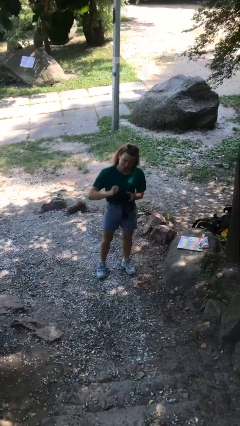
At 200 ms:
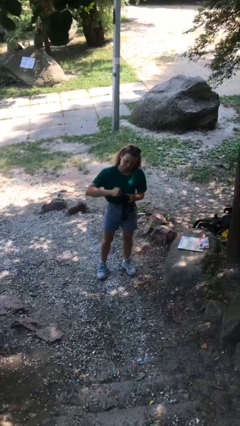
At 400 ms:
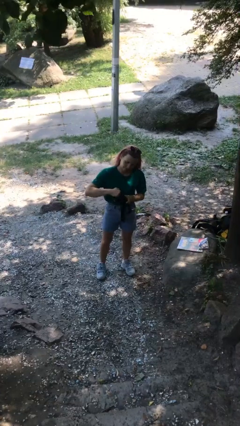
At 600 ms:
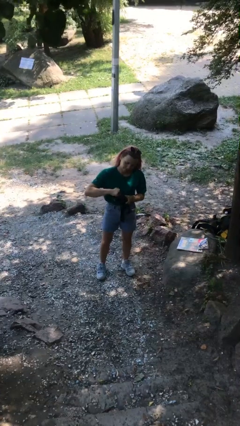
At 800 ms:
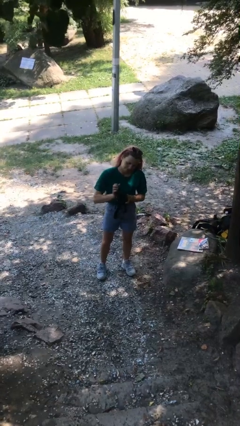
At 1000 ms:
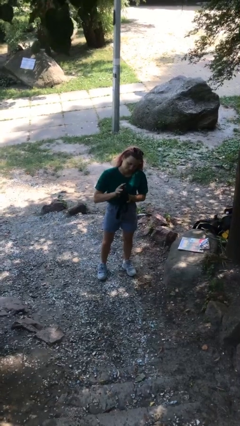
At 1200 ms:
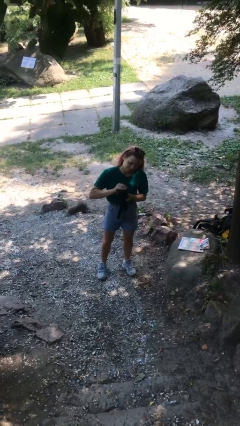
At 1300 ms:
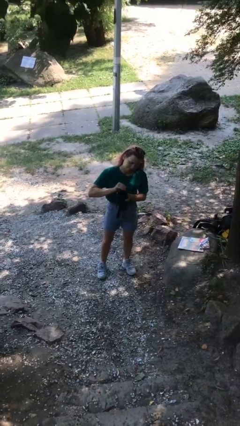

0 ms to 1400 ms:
person squeezes object

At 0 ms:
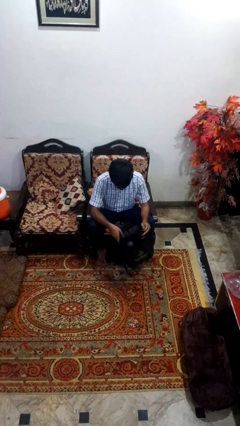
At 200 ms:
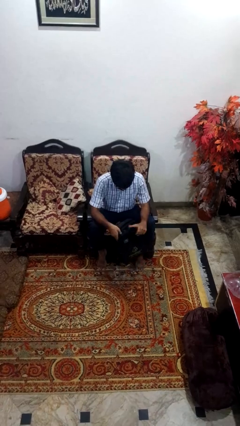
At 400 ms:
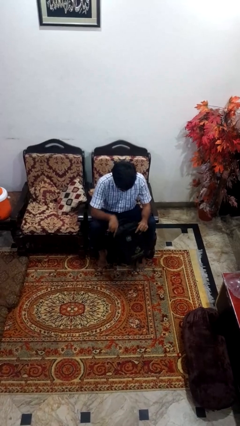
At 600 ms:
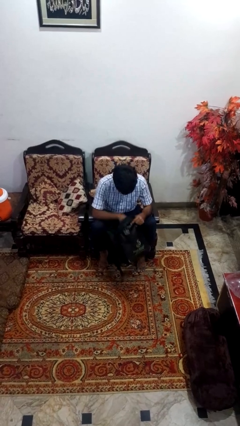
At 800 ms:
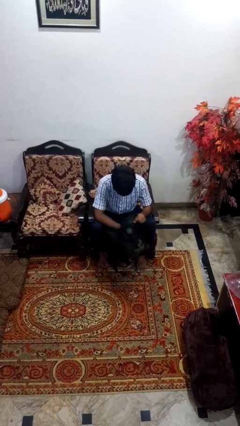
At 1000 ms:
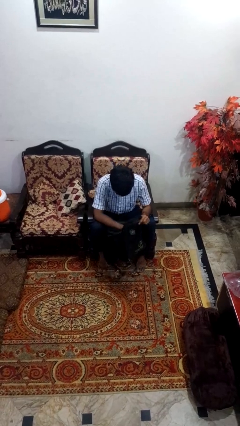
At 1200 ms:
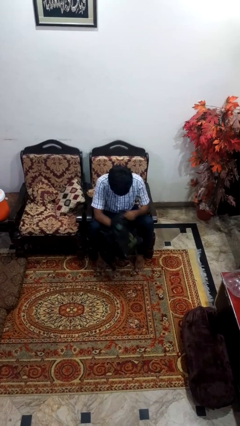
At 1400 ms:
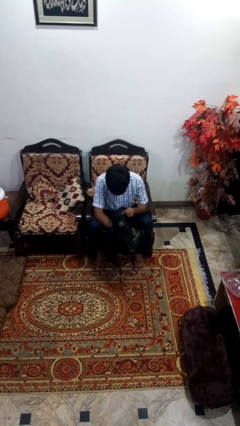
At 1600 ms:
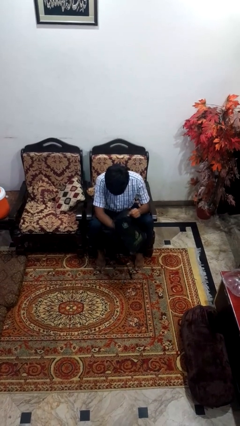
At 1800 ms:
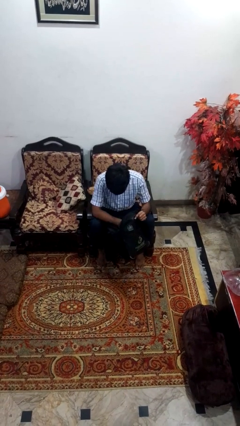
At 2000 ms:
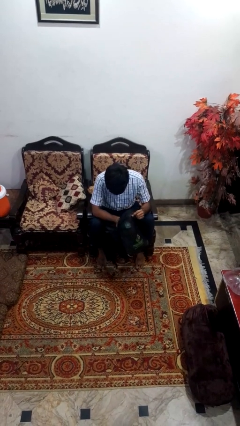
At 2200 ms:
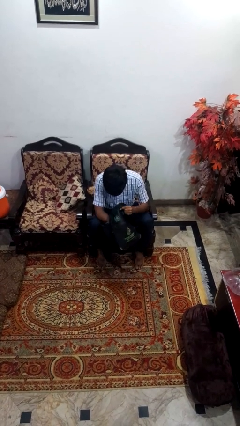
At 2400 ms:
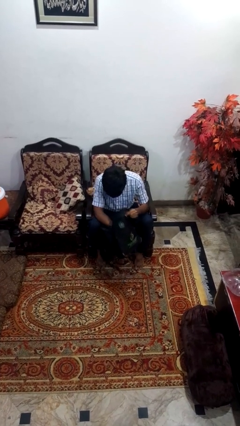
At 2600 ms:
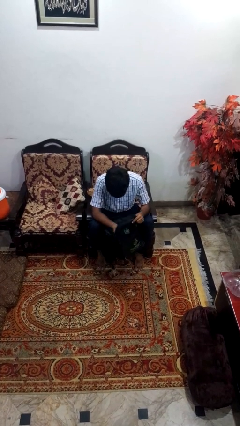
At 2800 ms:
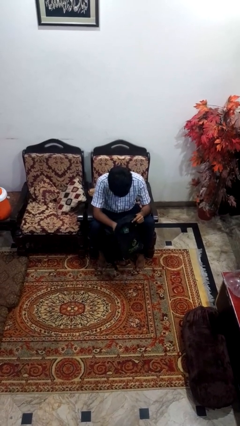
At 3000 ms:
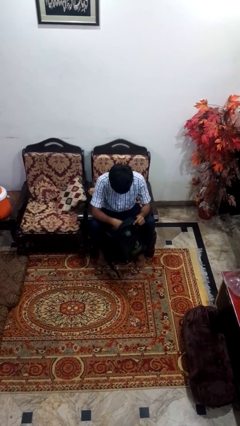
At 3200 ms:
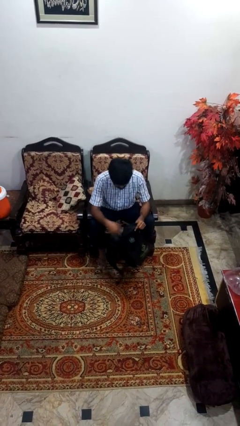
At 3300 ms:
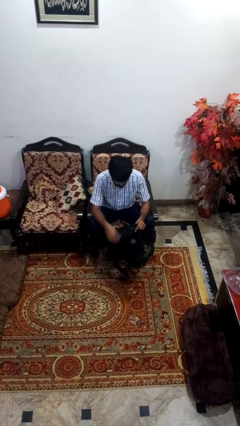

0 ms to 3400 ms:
person searches in bag

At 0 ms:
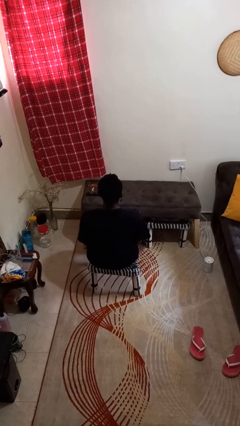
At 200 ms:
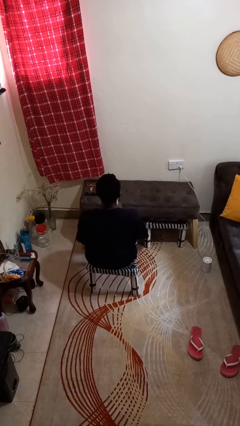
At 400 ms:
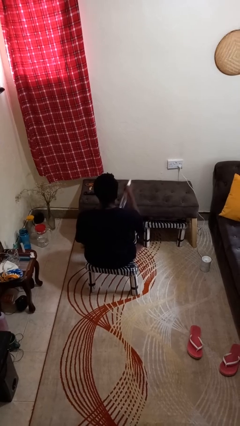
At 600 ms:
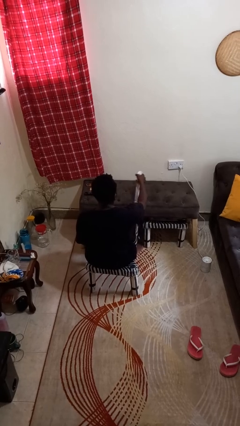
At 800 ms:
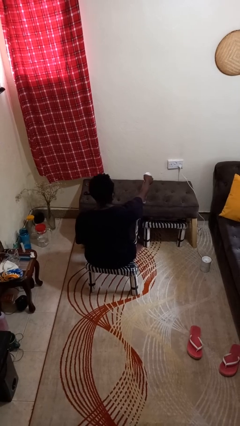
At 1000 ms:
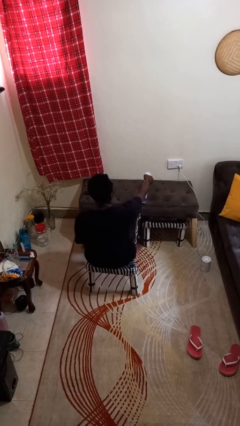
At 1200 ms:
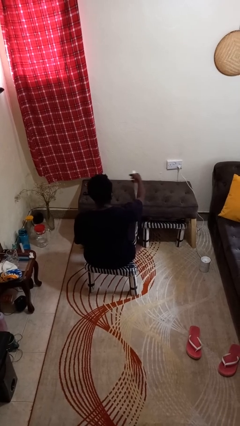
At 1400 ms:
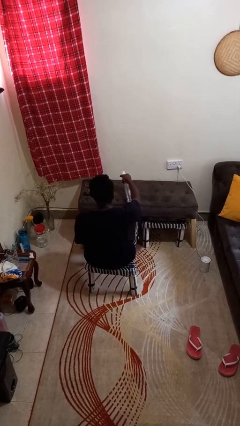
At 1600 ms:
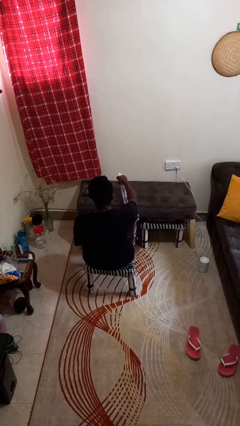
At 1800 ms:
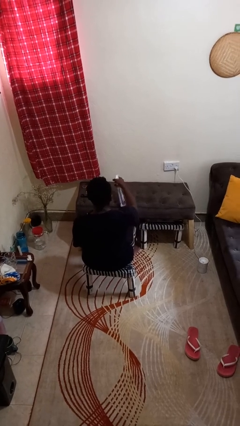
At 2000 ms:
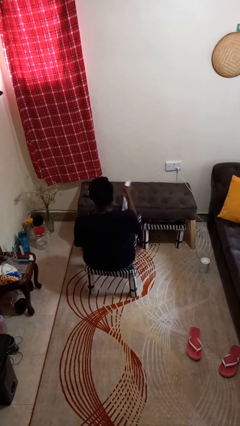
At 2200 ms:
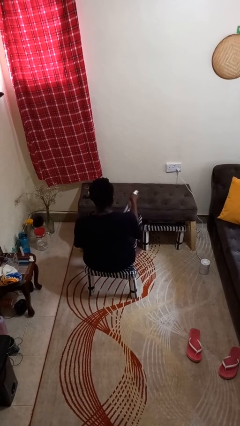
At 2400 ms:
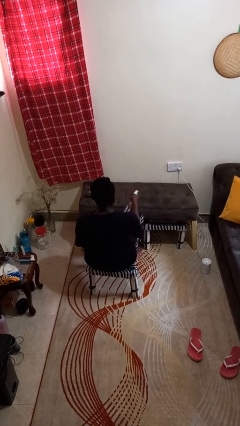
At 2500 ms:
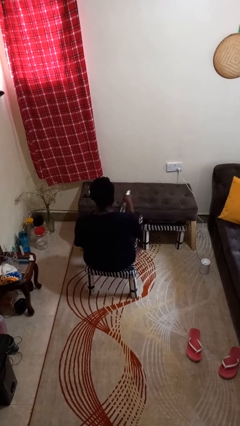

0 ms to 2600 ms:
person sprays from bottle

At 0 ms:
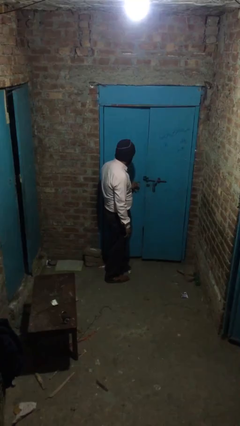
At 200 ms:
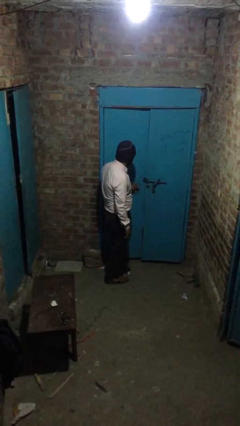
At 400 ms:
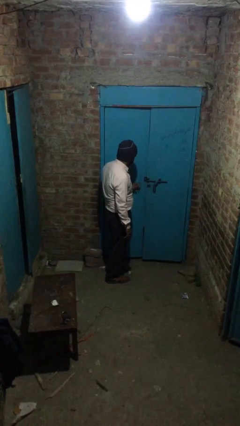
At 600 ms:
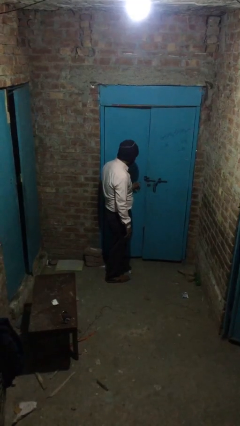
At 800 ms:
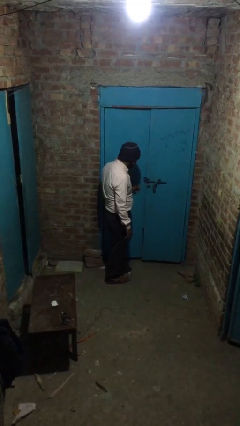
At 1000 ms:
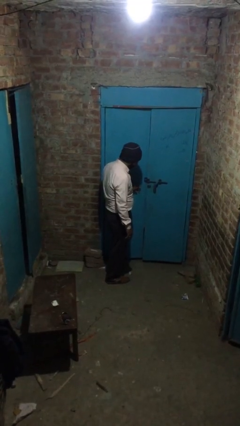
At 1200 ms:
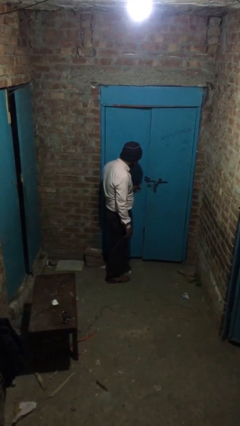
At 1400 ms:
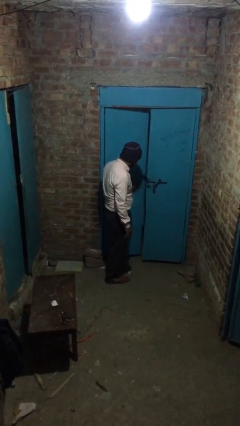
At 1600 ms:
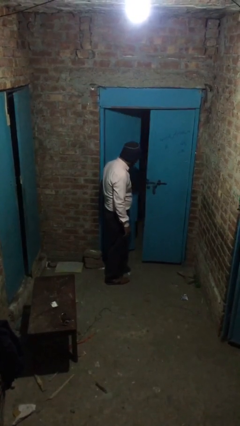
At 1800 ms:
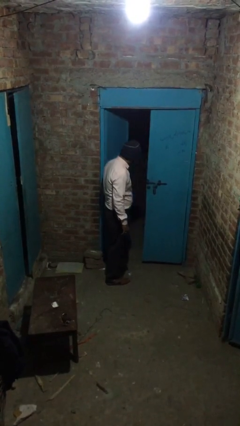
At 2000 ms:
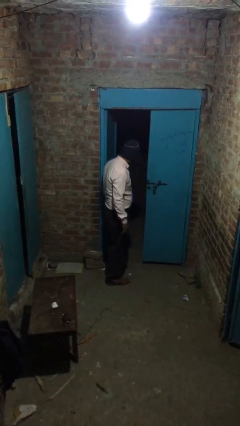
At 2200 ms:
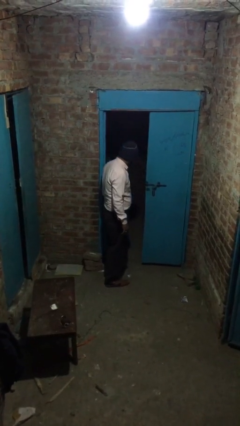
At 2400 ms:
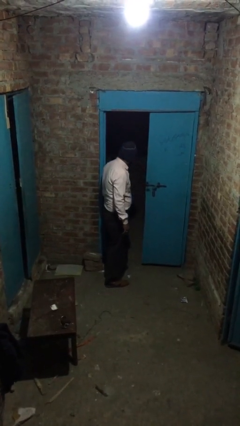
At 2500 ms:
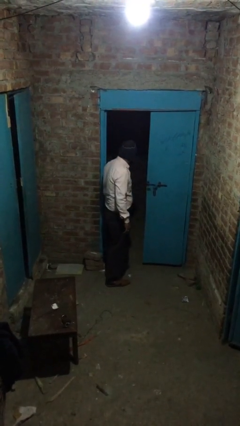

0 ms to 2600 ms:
person opens facility door

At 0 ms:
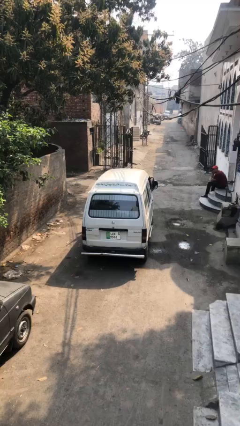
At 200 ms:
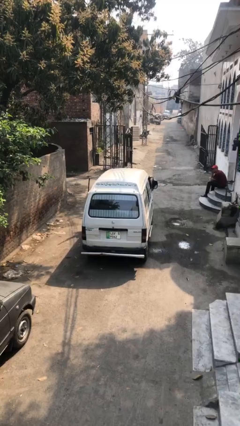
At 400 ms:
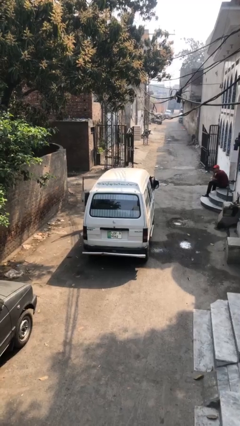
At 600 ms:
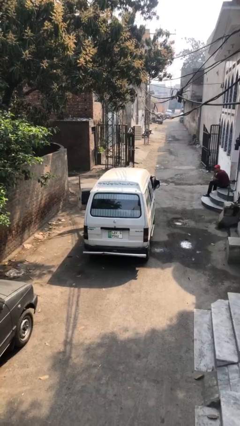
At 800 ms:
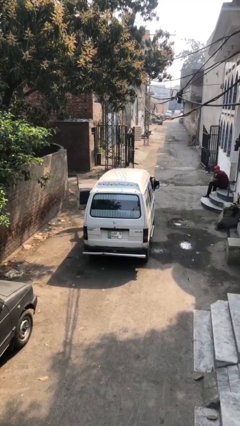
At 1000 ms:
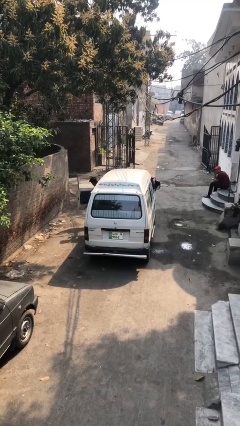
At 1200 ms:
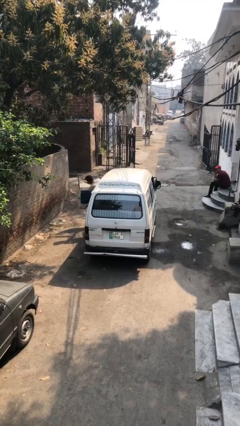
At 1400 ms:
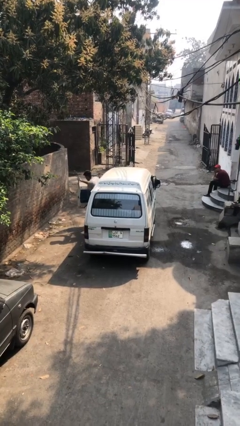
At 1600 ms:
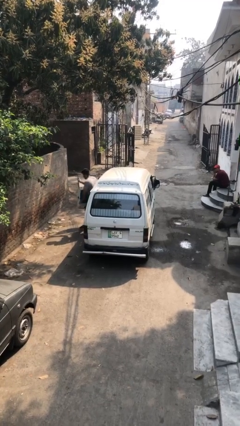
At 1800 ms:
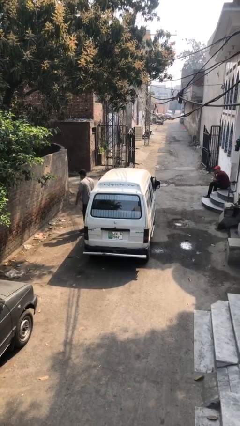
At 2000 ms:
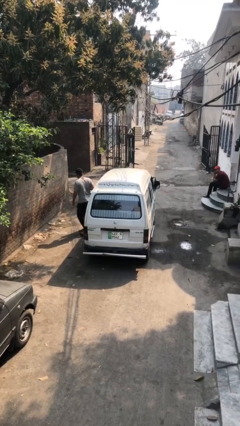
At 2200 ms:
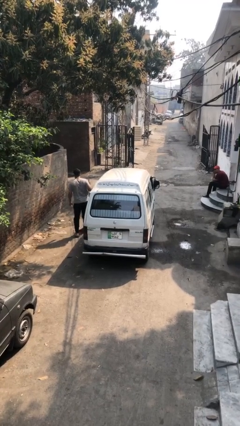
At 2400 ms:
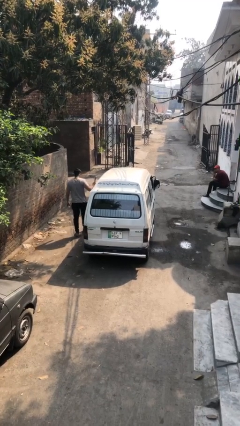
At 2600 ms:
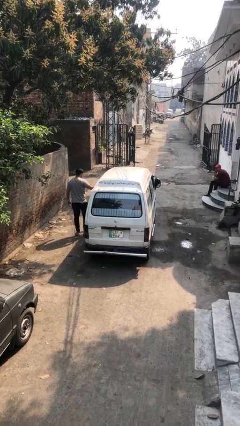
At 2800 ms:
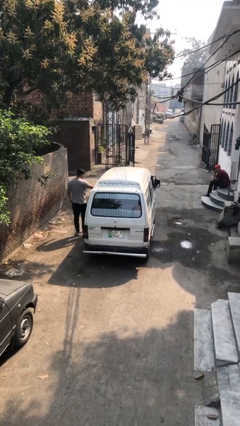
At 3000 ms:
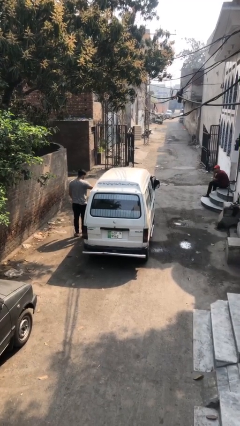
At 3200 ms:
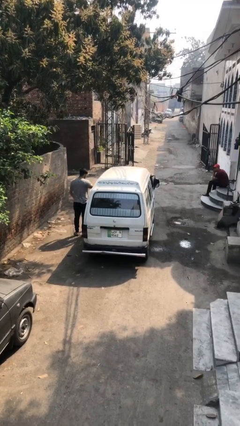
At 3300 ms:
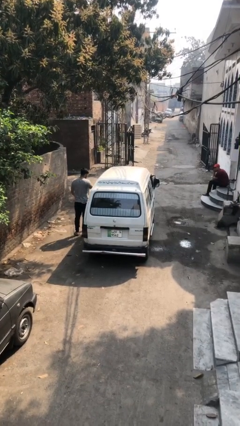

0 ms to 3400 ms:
car drops off person

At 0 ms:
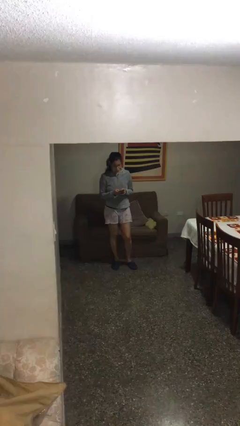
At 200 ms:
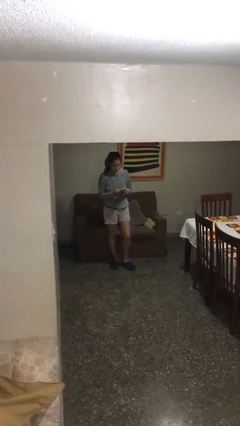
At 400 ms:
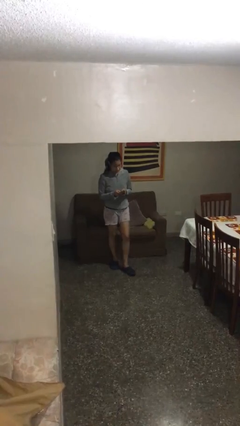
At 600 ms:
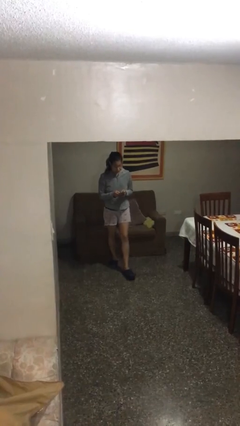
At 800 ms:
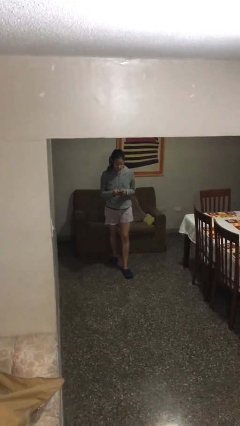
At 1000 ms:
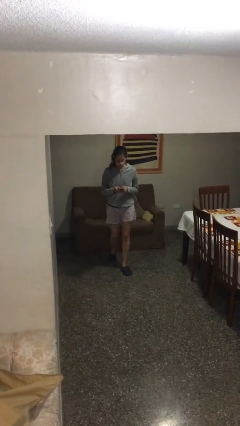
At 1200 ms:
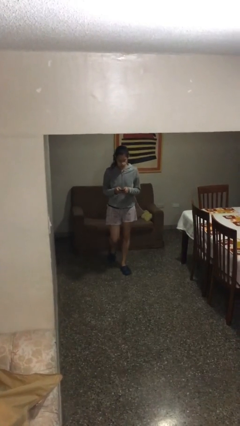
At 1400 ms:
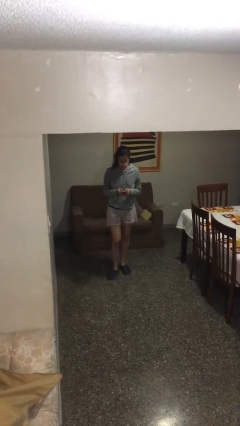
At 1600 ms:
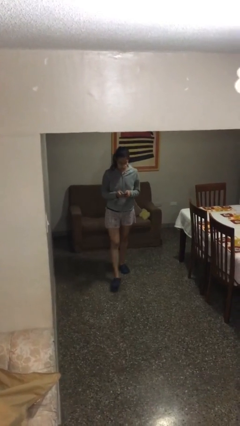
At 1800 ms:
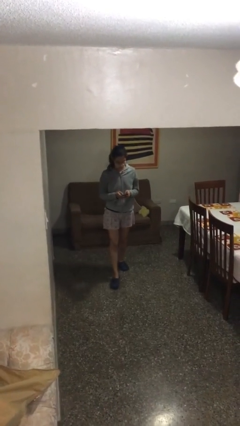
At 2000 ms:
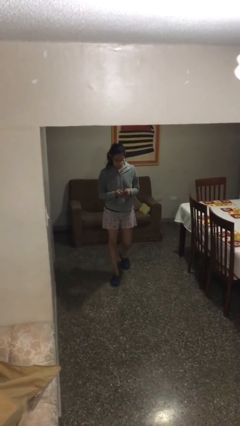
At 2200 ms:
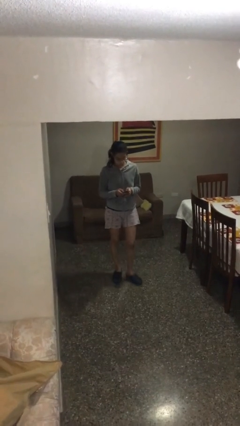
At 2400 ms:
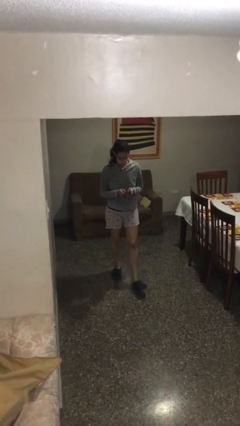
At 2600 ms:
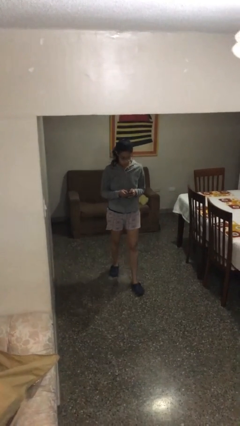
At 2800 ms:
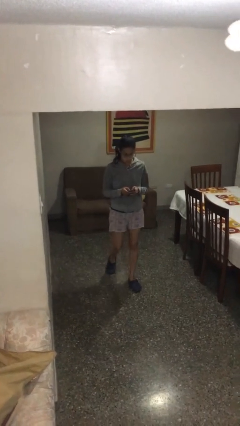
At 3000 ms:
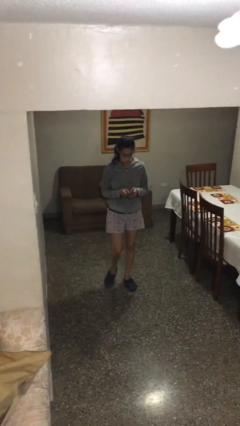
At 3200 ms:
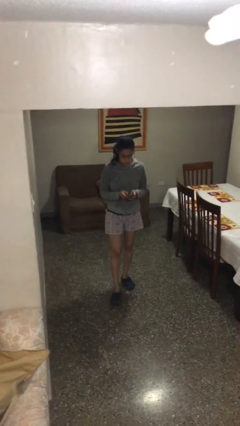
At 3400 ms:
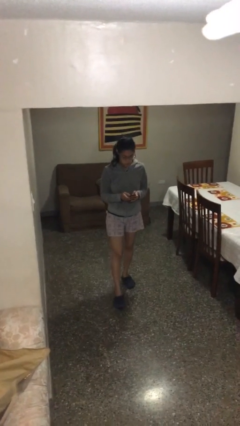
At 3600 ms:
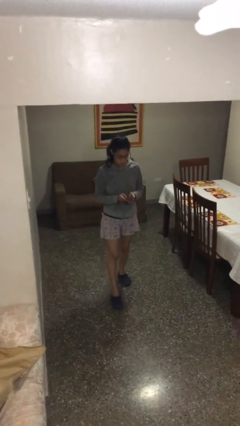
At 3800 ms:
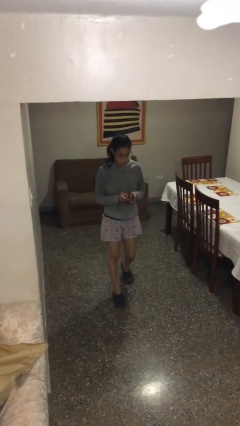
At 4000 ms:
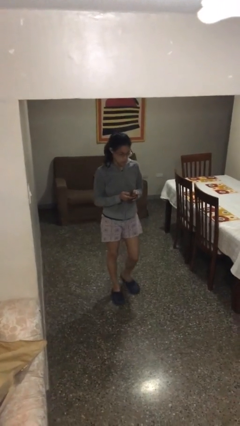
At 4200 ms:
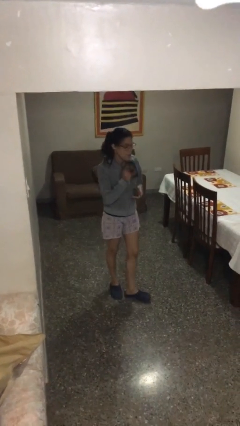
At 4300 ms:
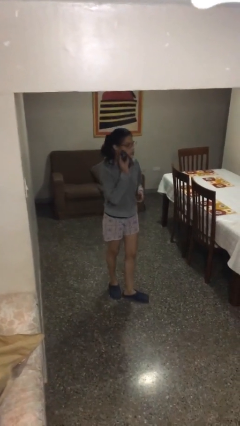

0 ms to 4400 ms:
person texts on phone
